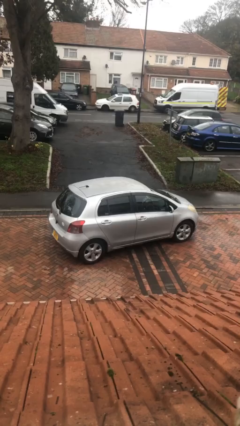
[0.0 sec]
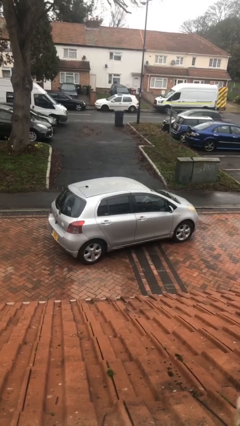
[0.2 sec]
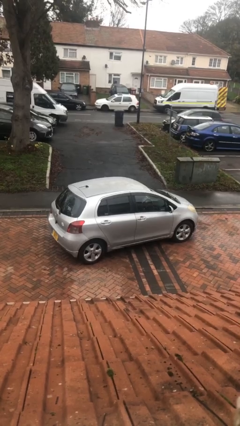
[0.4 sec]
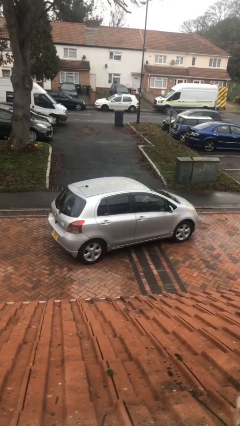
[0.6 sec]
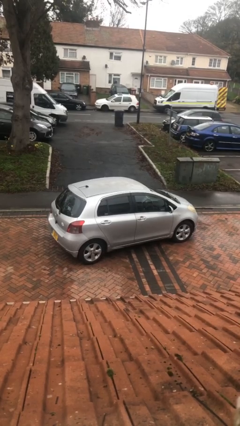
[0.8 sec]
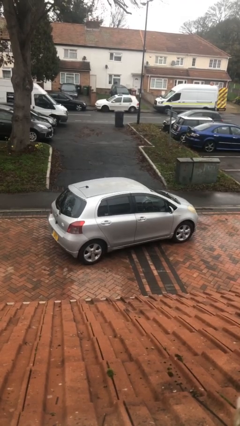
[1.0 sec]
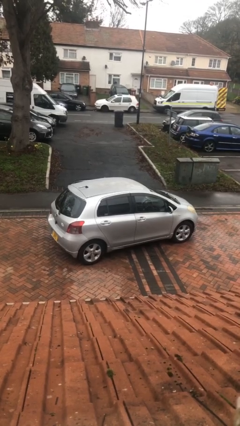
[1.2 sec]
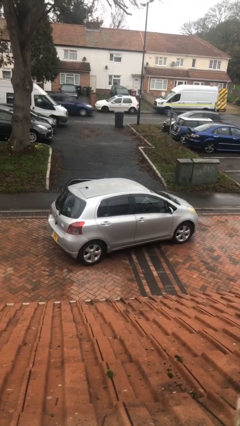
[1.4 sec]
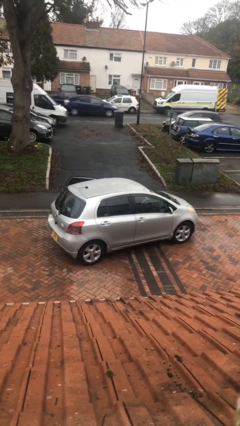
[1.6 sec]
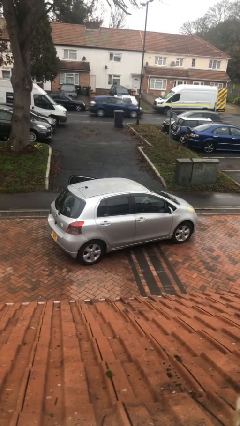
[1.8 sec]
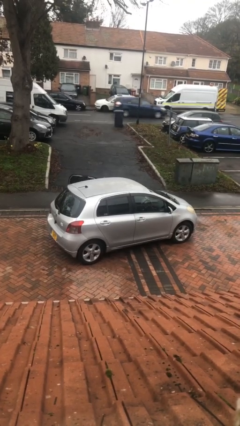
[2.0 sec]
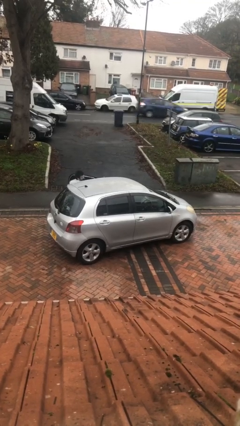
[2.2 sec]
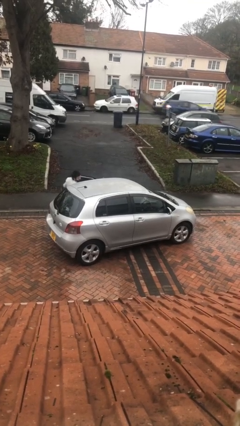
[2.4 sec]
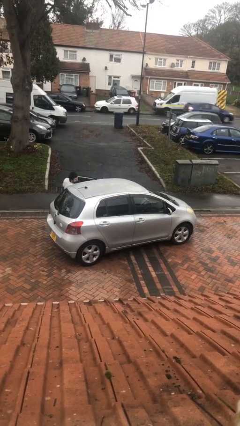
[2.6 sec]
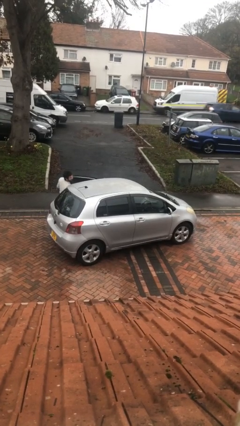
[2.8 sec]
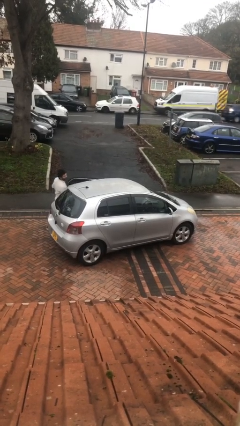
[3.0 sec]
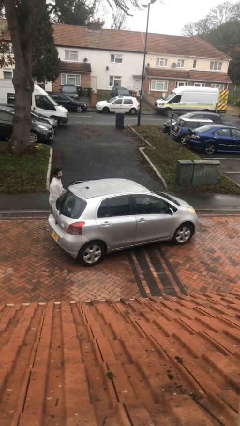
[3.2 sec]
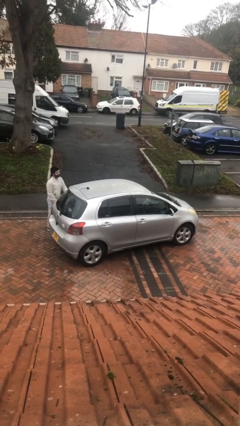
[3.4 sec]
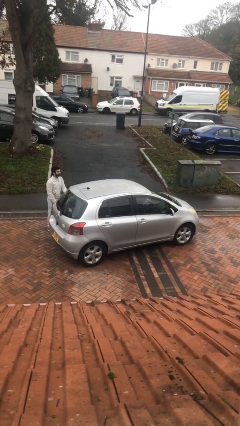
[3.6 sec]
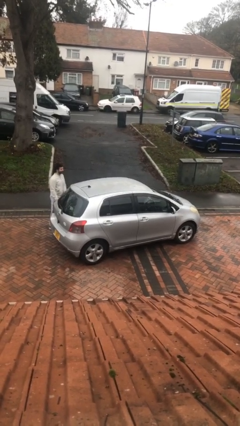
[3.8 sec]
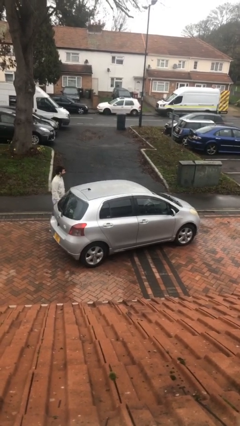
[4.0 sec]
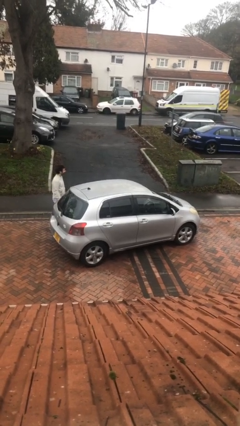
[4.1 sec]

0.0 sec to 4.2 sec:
car drops off person

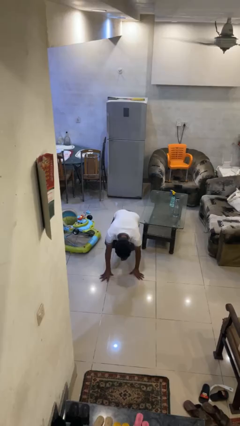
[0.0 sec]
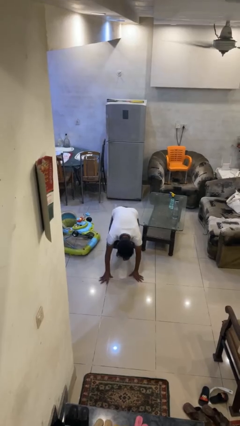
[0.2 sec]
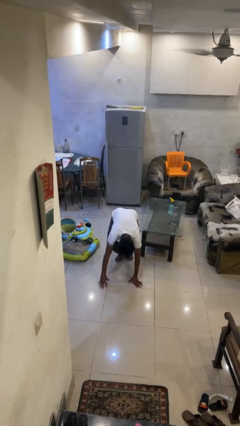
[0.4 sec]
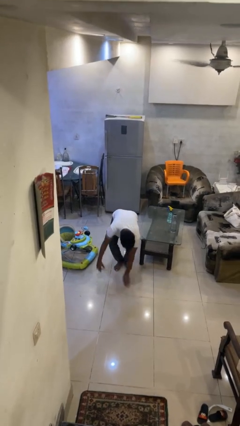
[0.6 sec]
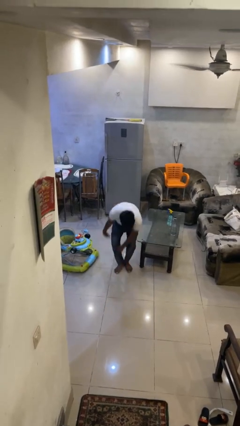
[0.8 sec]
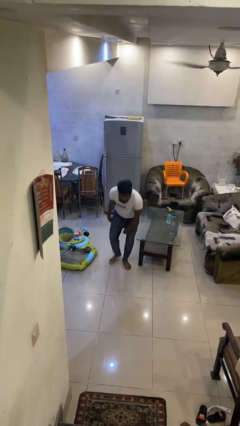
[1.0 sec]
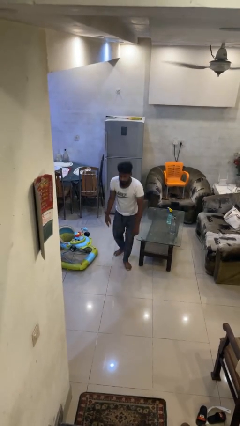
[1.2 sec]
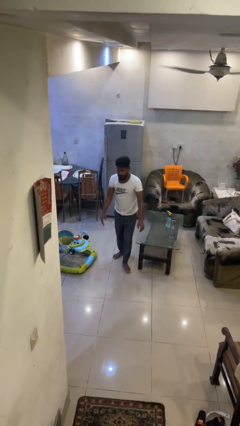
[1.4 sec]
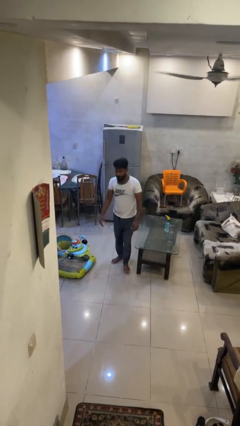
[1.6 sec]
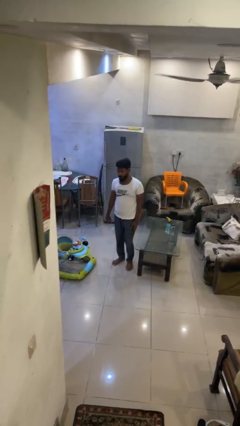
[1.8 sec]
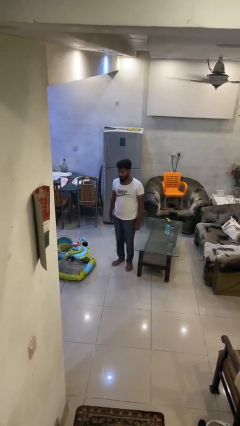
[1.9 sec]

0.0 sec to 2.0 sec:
person stands up from floor

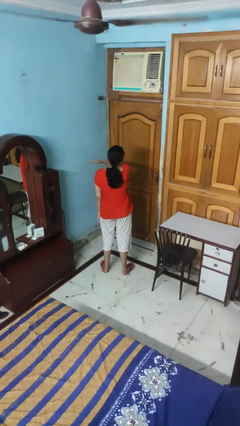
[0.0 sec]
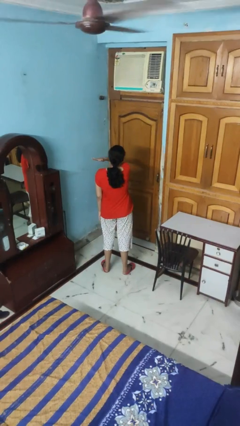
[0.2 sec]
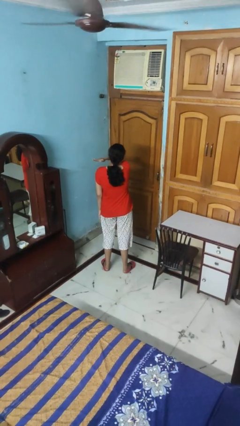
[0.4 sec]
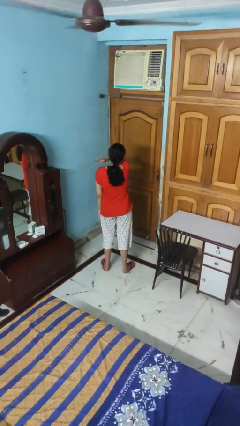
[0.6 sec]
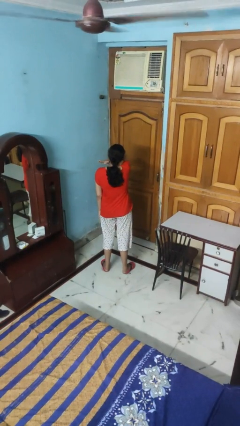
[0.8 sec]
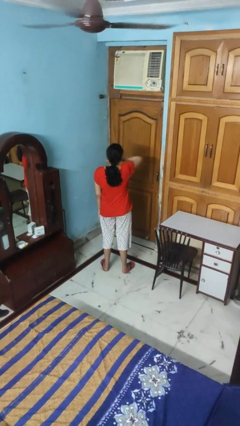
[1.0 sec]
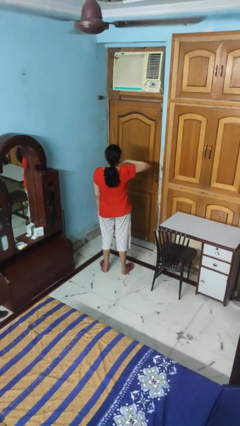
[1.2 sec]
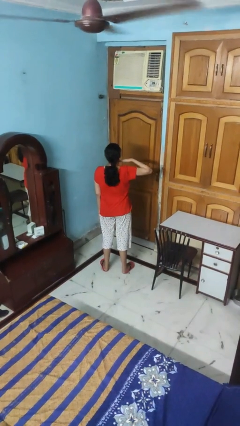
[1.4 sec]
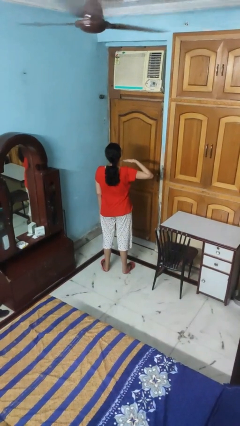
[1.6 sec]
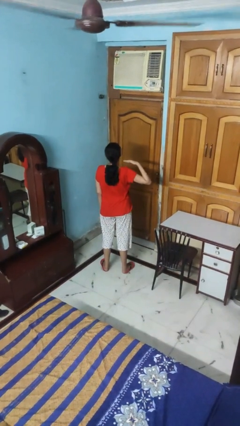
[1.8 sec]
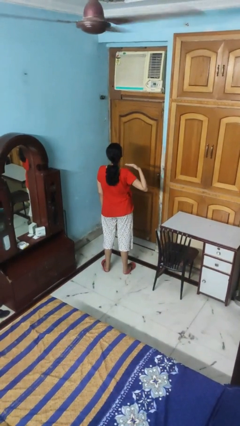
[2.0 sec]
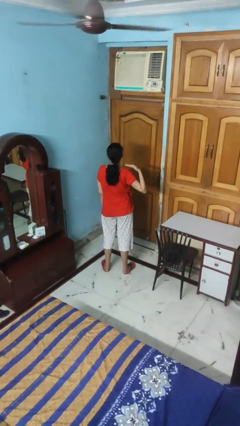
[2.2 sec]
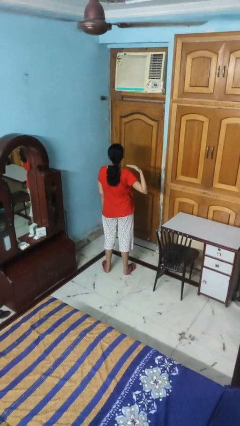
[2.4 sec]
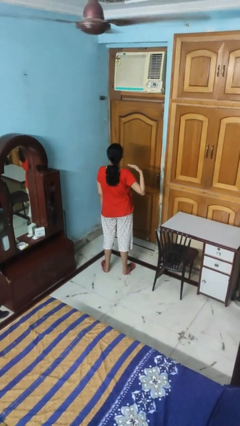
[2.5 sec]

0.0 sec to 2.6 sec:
person gestures cut

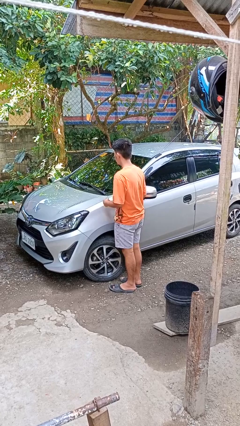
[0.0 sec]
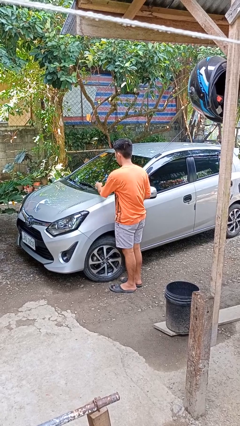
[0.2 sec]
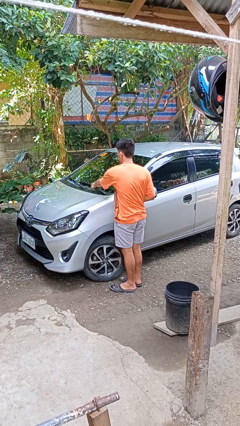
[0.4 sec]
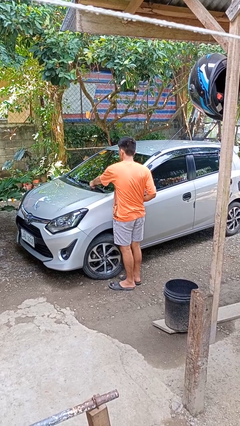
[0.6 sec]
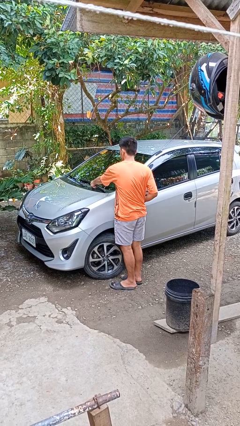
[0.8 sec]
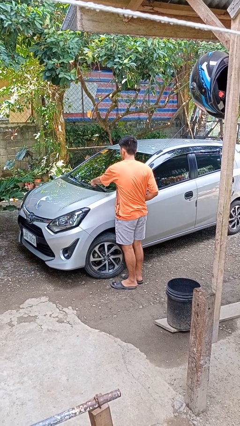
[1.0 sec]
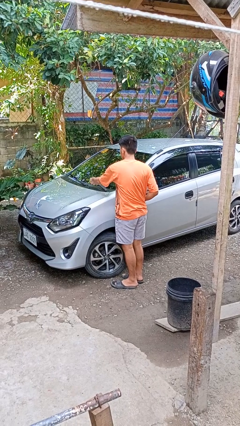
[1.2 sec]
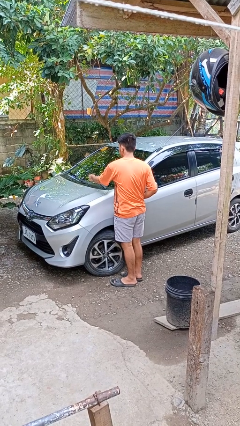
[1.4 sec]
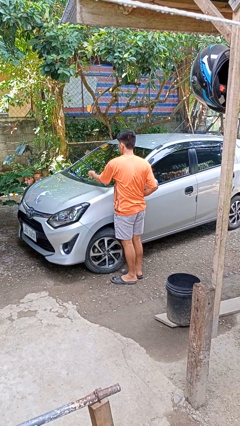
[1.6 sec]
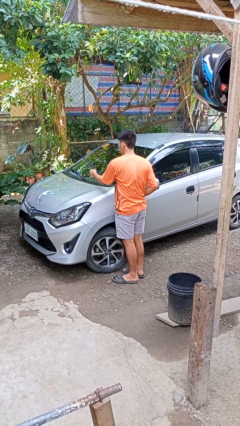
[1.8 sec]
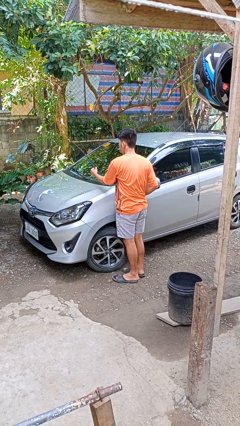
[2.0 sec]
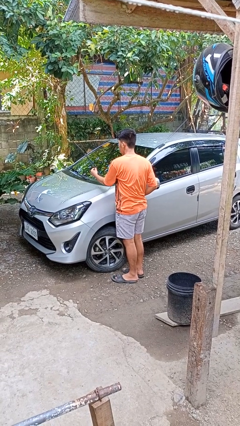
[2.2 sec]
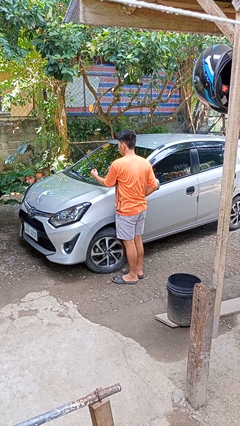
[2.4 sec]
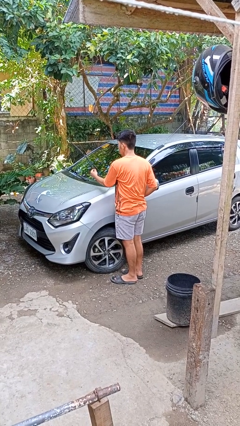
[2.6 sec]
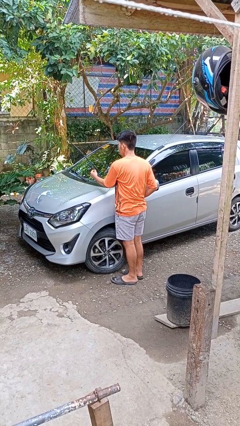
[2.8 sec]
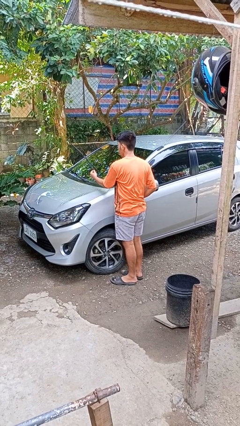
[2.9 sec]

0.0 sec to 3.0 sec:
person flips up car wipers

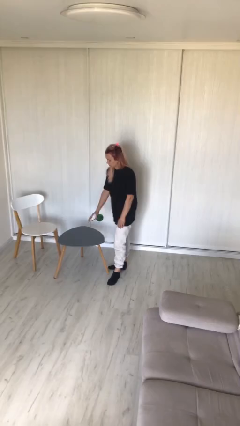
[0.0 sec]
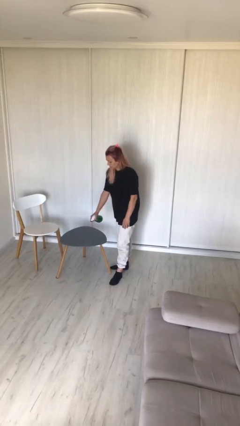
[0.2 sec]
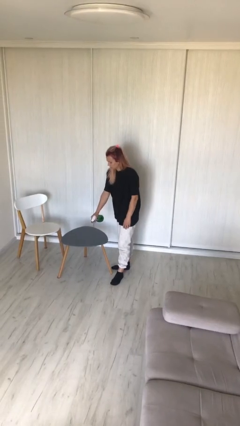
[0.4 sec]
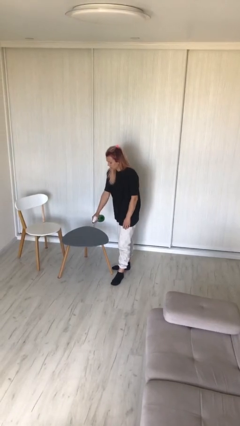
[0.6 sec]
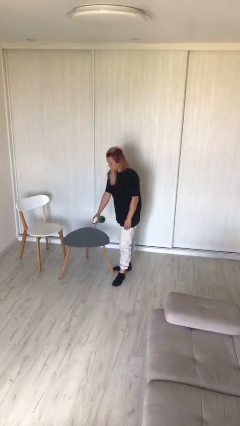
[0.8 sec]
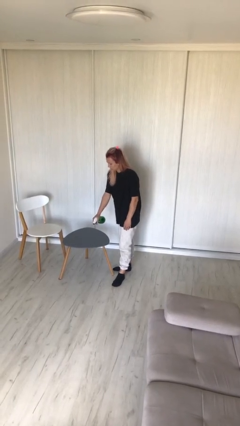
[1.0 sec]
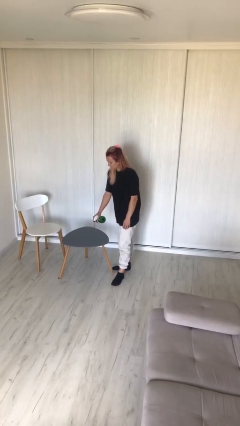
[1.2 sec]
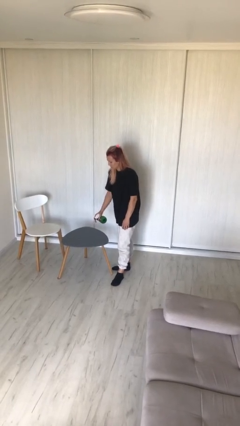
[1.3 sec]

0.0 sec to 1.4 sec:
person sprays from bottle

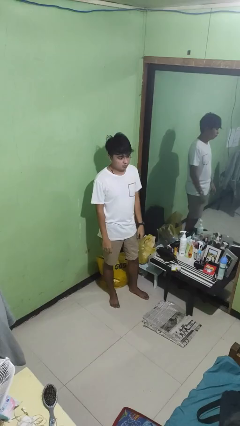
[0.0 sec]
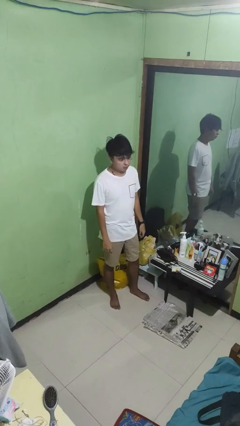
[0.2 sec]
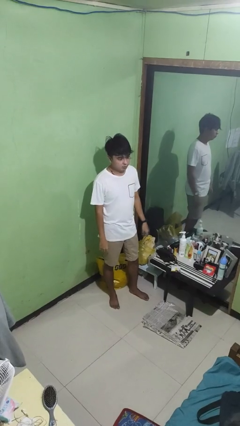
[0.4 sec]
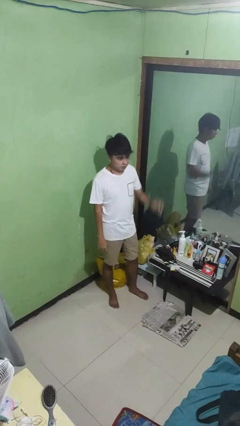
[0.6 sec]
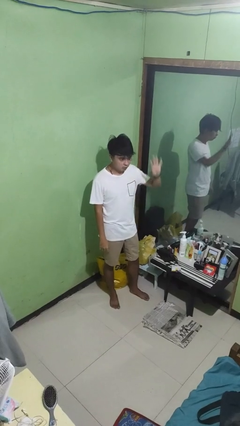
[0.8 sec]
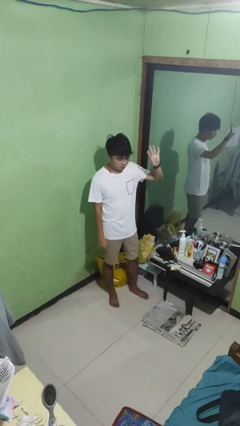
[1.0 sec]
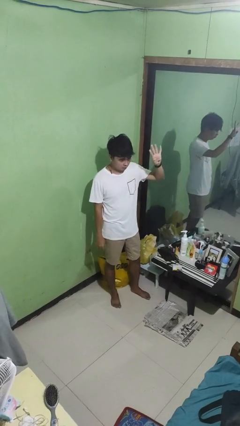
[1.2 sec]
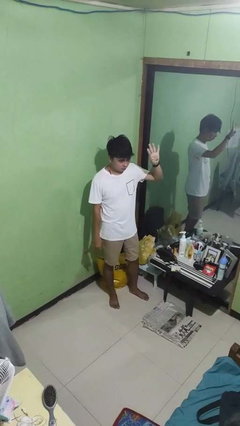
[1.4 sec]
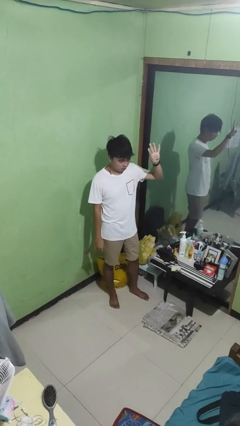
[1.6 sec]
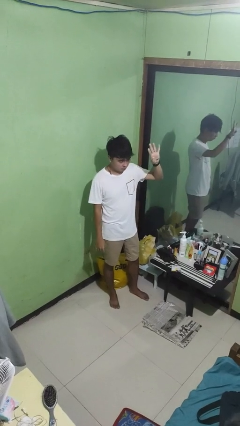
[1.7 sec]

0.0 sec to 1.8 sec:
person gestures number four

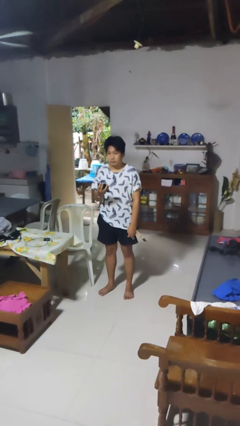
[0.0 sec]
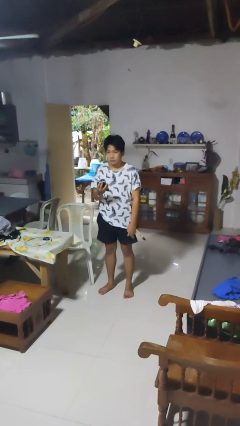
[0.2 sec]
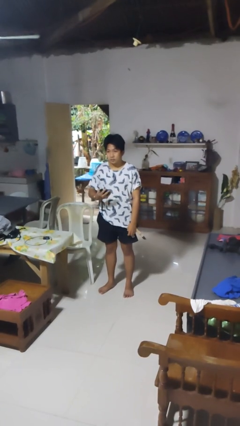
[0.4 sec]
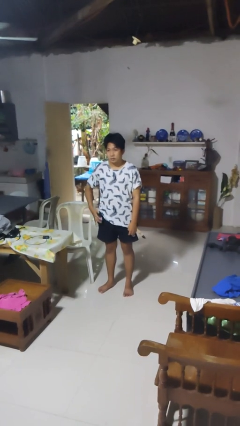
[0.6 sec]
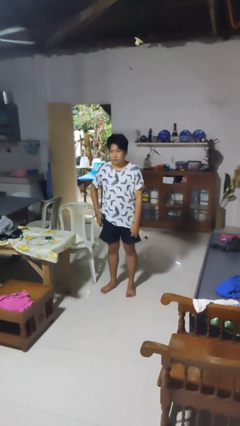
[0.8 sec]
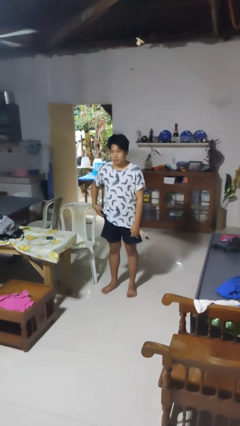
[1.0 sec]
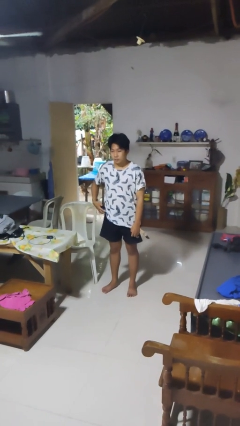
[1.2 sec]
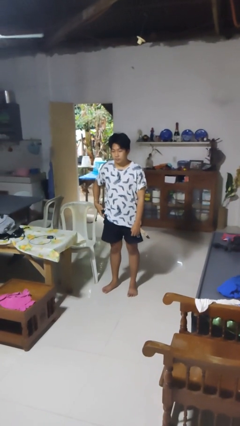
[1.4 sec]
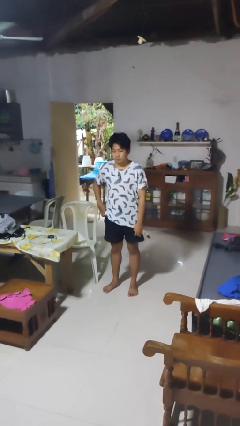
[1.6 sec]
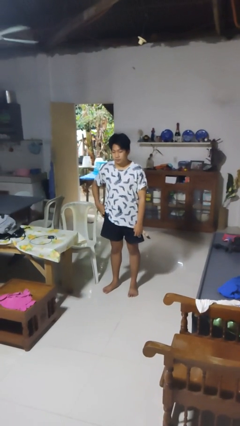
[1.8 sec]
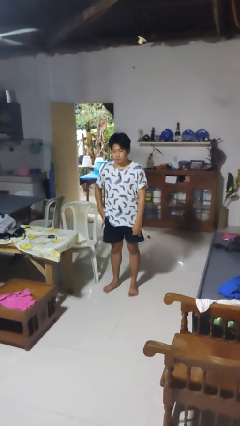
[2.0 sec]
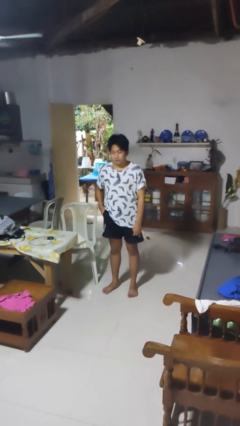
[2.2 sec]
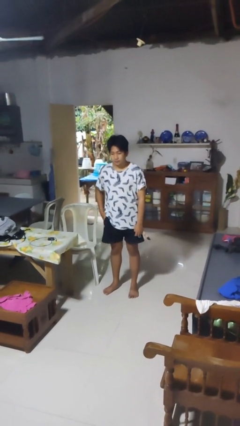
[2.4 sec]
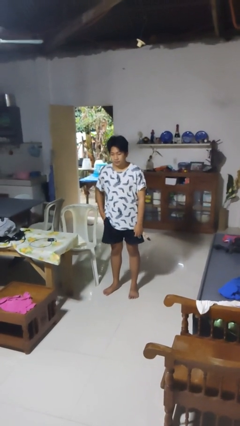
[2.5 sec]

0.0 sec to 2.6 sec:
person puts phone into pocket
